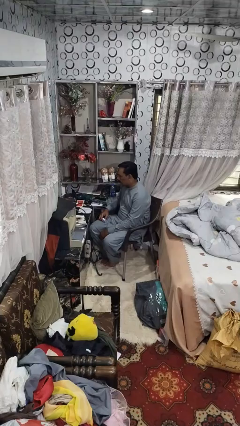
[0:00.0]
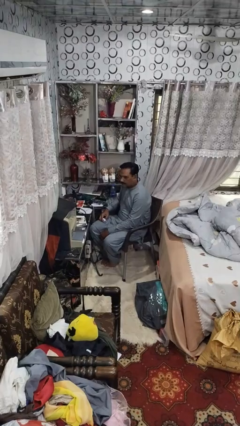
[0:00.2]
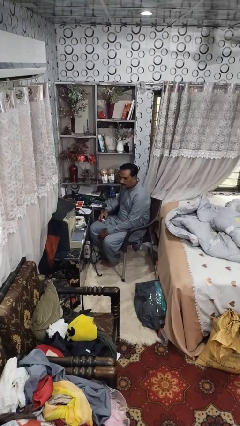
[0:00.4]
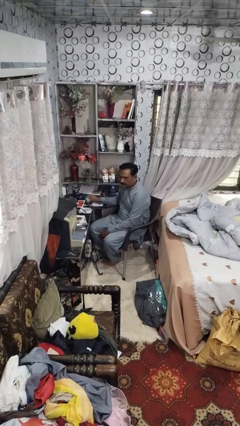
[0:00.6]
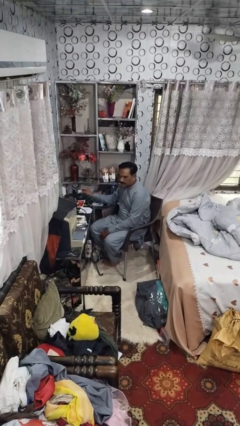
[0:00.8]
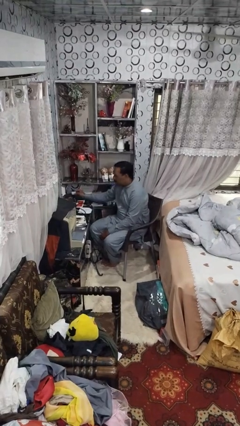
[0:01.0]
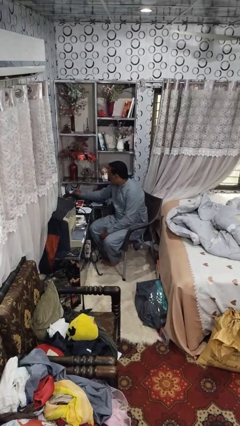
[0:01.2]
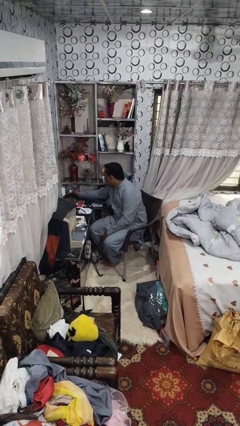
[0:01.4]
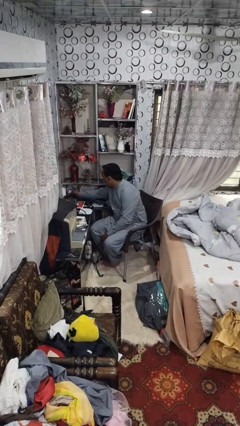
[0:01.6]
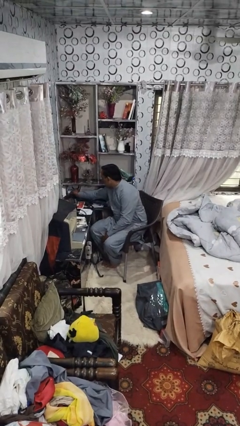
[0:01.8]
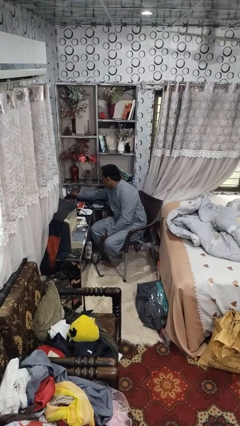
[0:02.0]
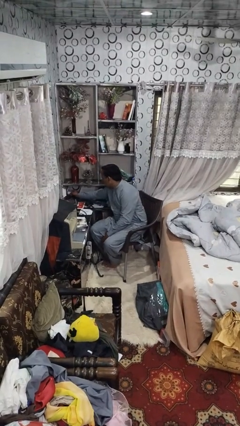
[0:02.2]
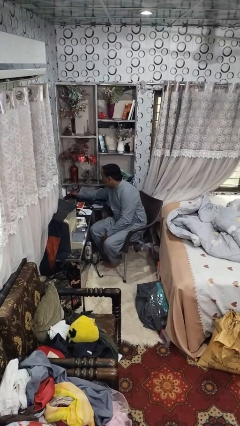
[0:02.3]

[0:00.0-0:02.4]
person plugs into electrical socket

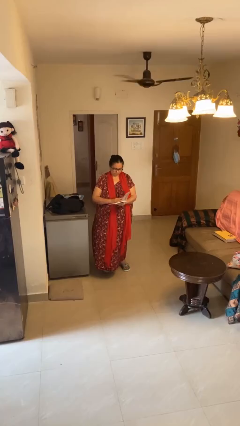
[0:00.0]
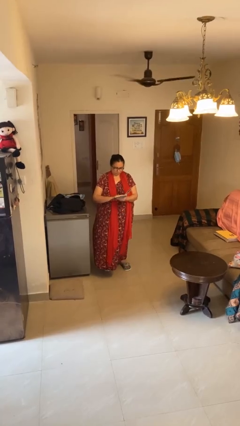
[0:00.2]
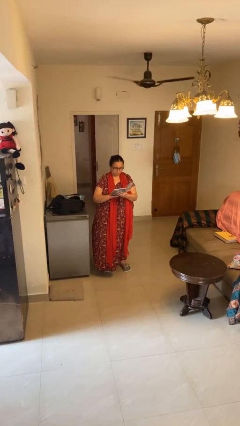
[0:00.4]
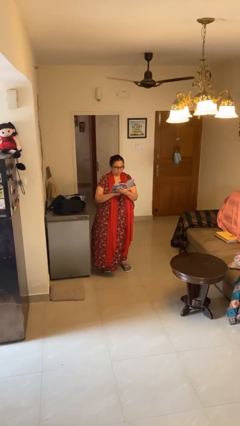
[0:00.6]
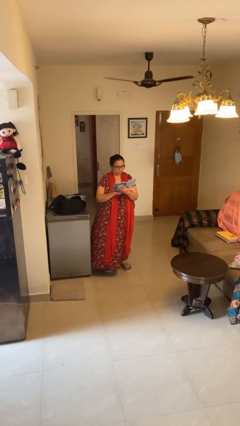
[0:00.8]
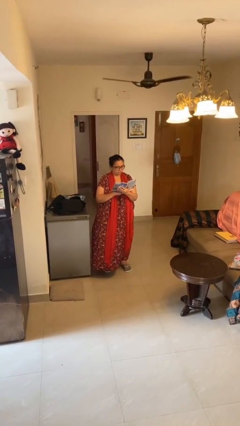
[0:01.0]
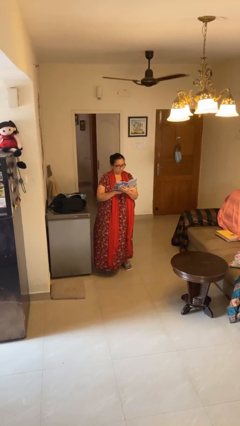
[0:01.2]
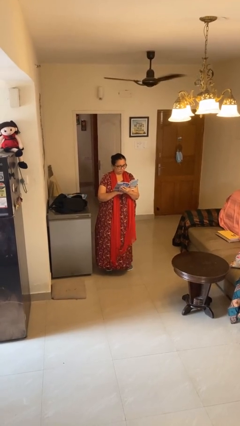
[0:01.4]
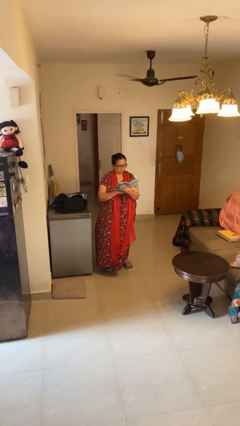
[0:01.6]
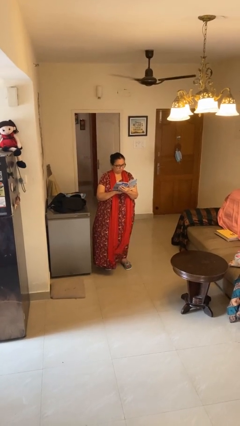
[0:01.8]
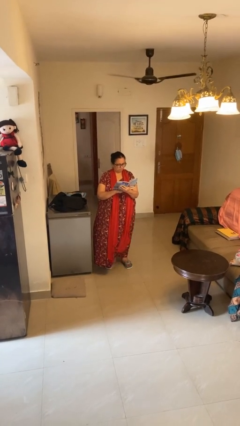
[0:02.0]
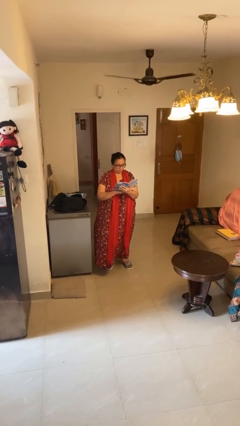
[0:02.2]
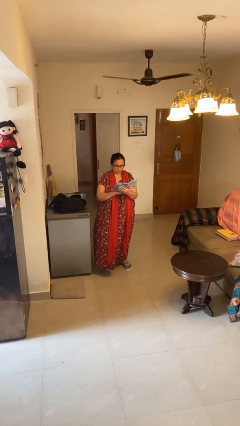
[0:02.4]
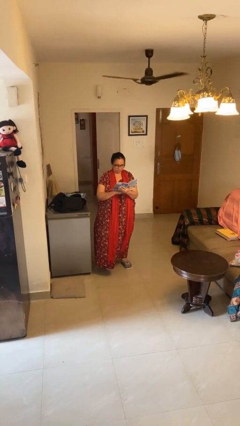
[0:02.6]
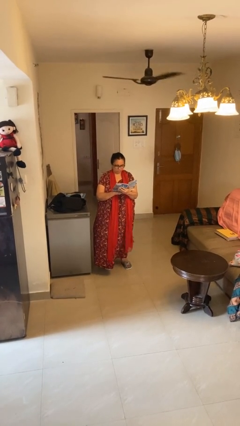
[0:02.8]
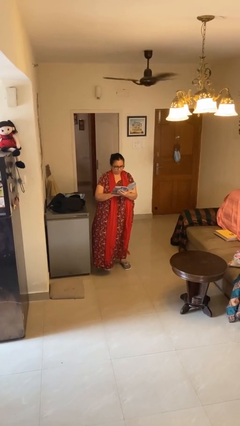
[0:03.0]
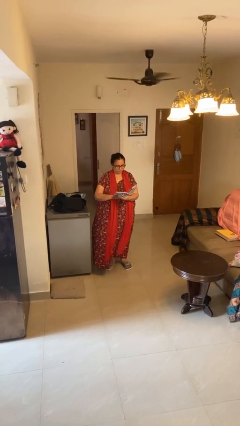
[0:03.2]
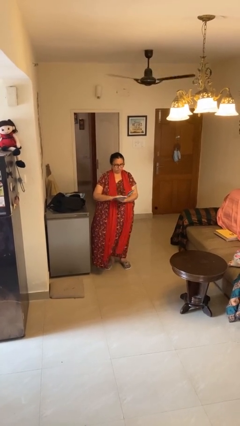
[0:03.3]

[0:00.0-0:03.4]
person reads document

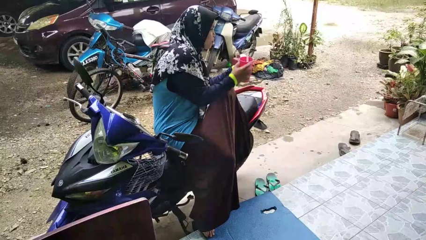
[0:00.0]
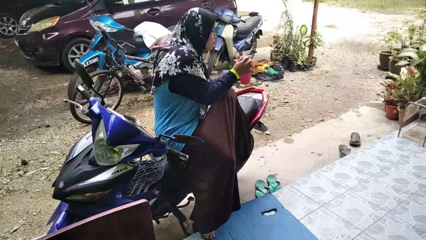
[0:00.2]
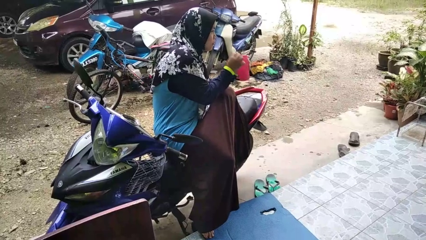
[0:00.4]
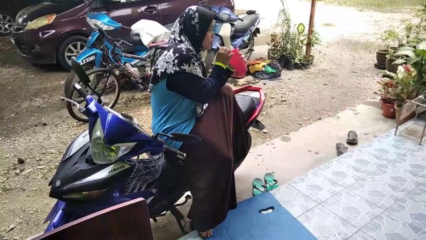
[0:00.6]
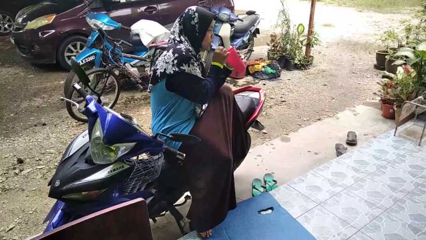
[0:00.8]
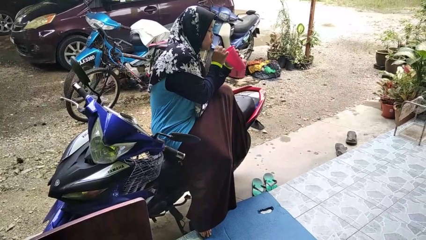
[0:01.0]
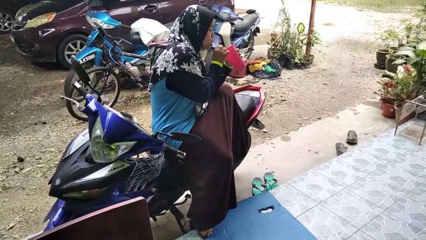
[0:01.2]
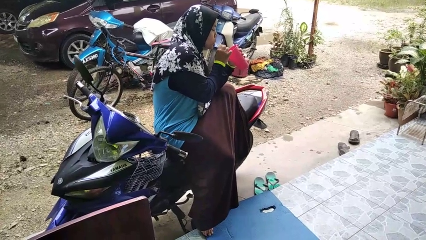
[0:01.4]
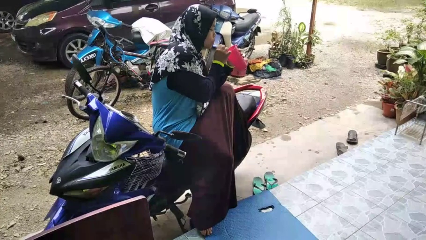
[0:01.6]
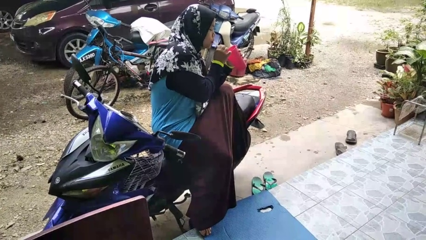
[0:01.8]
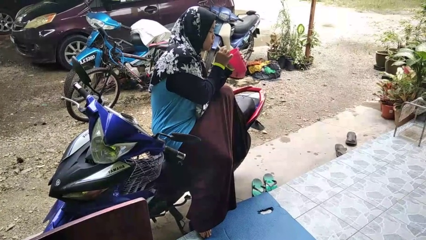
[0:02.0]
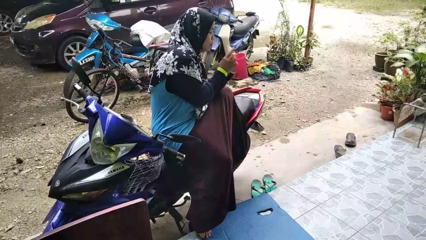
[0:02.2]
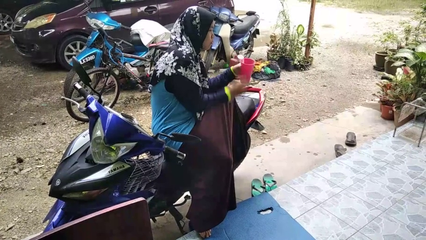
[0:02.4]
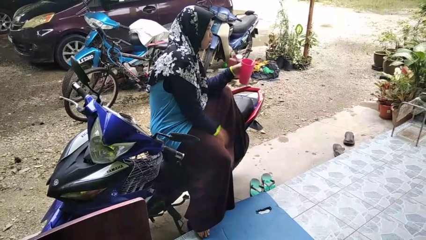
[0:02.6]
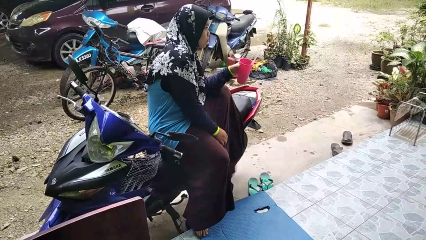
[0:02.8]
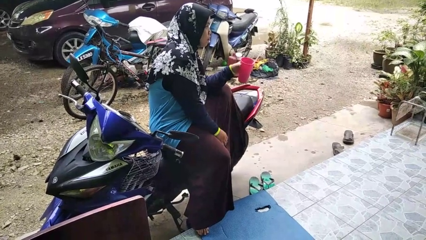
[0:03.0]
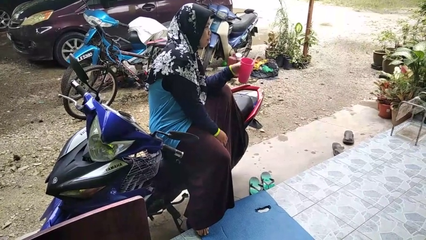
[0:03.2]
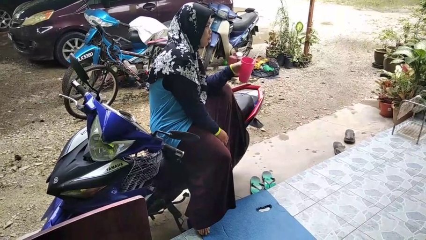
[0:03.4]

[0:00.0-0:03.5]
person drinks from straw

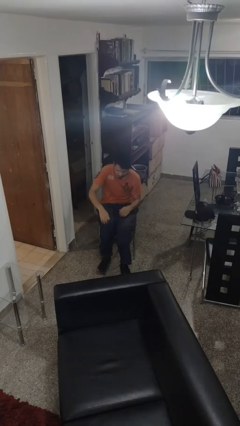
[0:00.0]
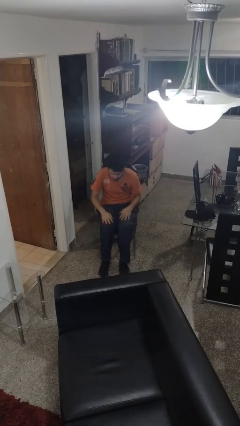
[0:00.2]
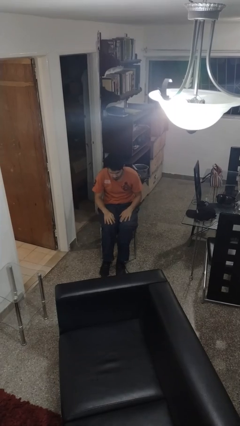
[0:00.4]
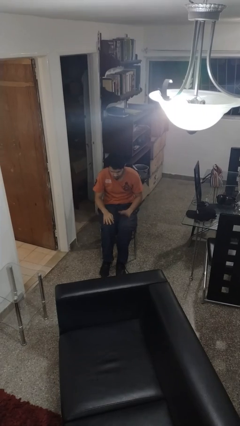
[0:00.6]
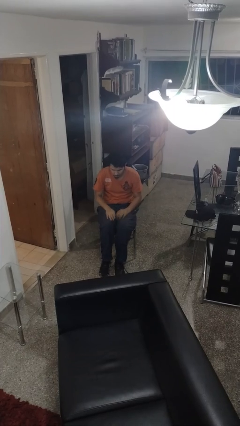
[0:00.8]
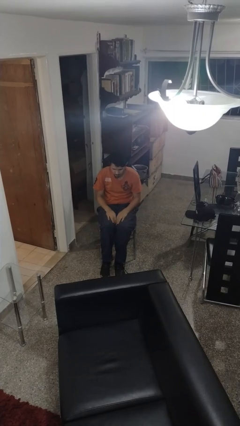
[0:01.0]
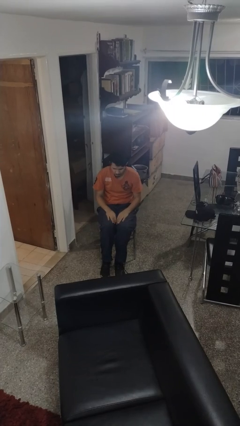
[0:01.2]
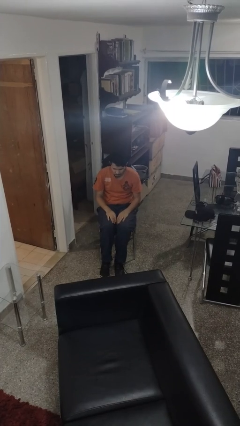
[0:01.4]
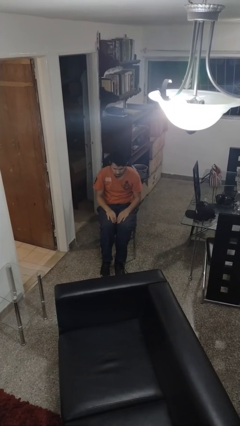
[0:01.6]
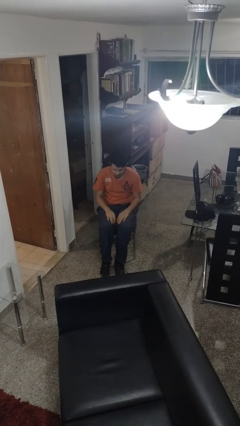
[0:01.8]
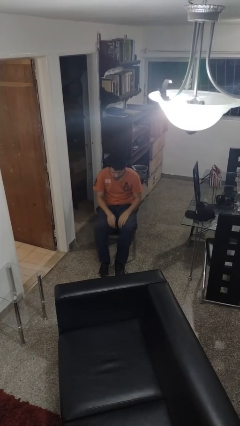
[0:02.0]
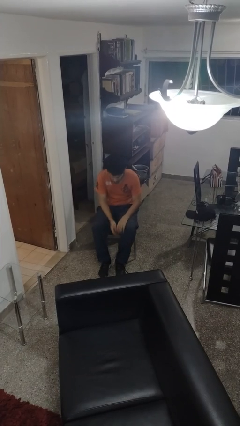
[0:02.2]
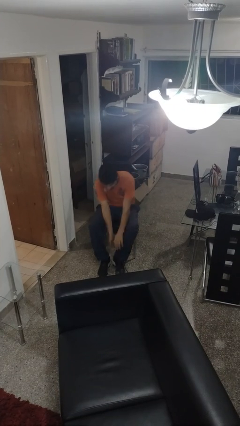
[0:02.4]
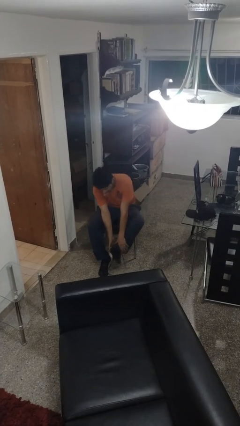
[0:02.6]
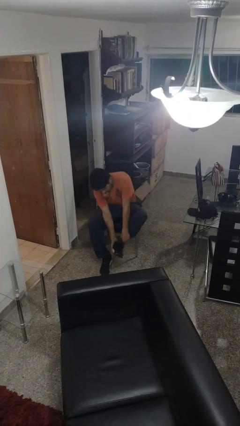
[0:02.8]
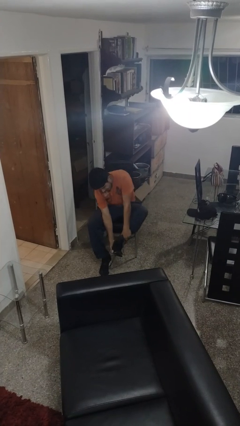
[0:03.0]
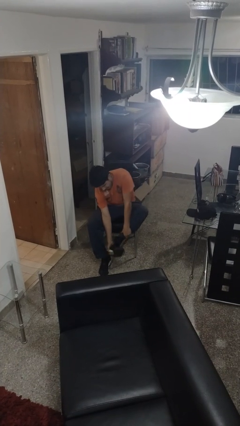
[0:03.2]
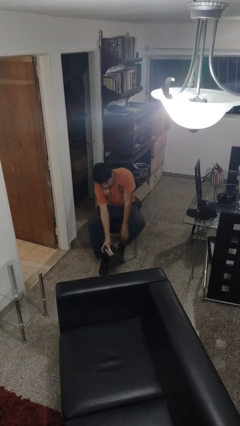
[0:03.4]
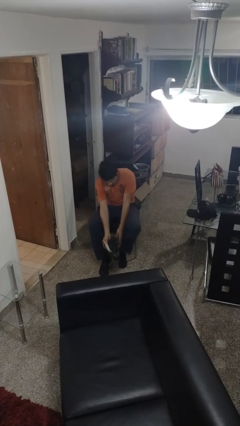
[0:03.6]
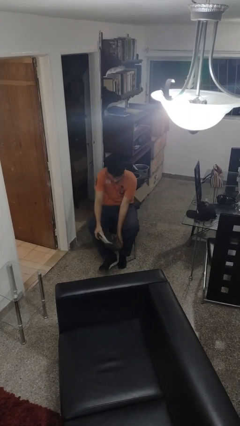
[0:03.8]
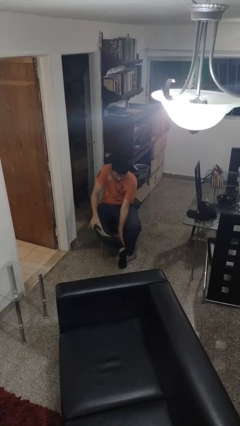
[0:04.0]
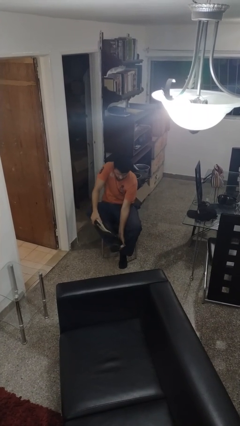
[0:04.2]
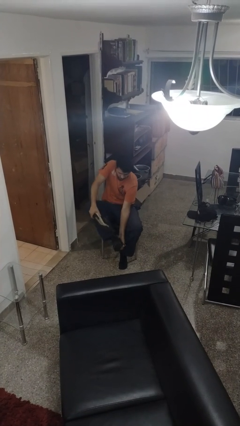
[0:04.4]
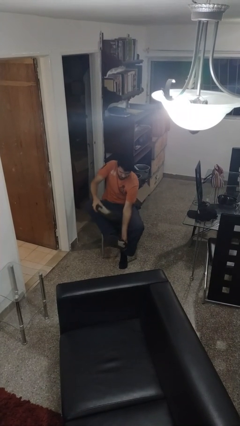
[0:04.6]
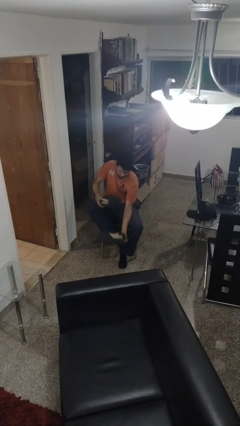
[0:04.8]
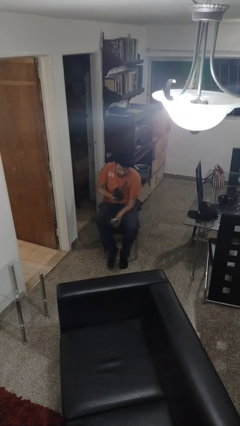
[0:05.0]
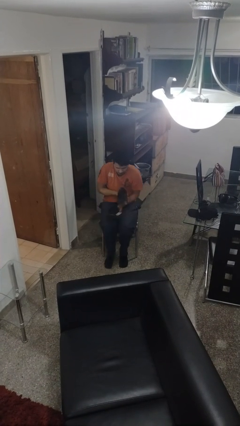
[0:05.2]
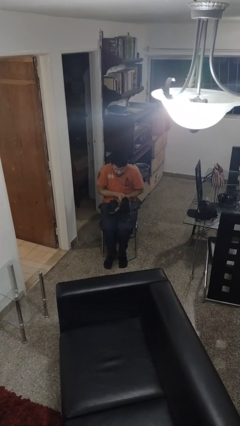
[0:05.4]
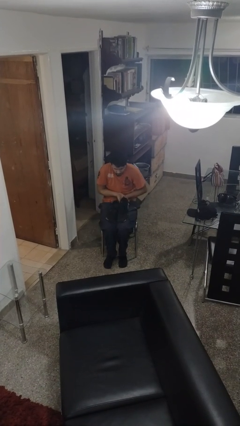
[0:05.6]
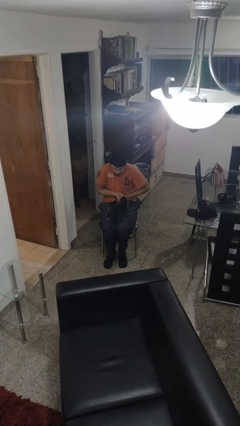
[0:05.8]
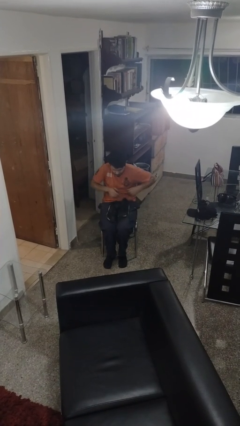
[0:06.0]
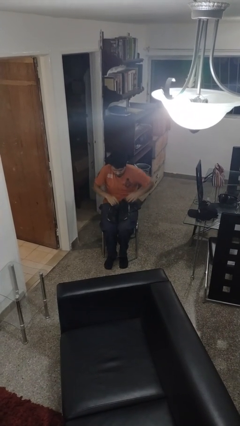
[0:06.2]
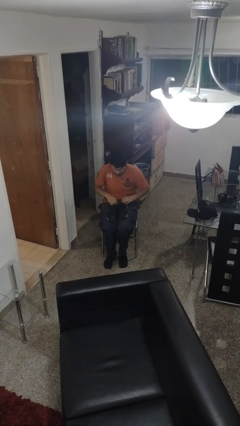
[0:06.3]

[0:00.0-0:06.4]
person takes off shoes

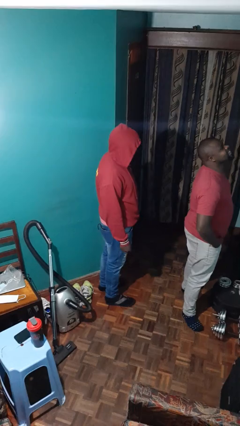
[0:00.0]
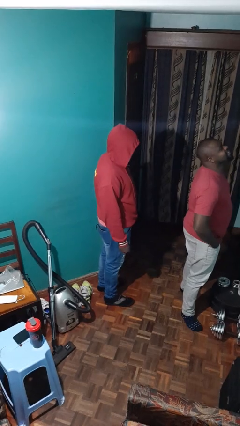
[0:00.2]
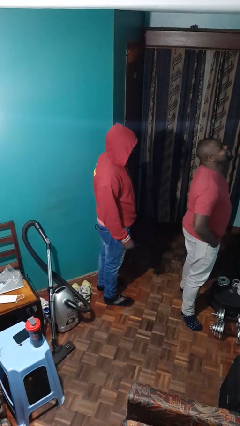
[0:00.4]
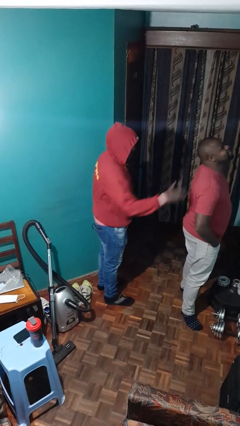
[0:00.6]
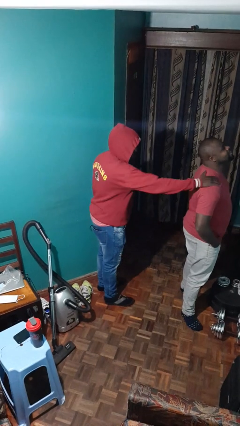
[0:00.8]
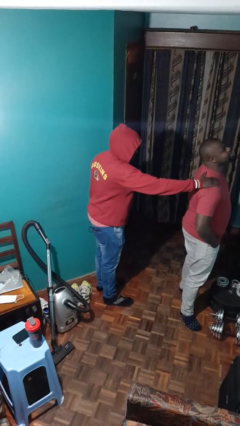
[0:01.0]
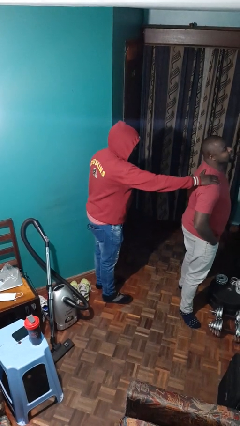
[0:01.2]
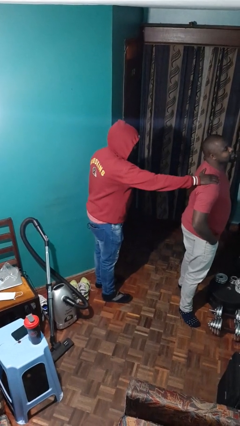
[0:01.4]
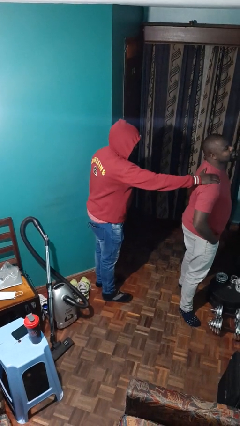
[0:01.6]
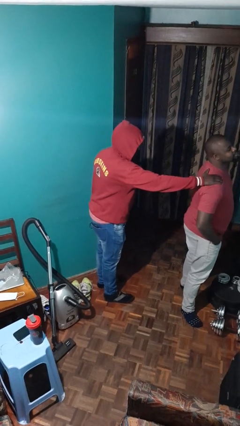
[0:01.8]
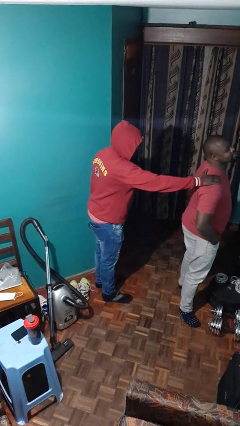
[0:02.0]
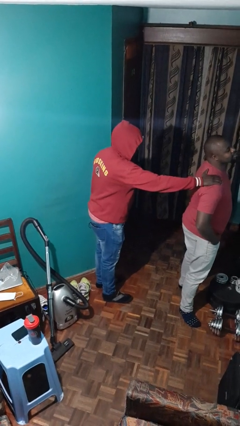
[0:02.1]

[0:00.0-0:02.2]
person grabs person by shoulder
